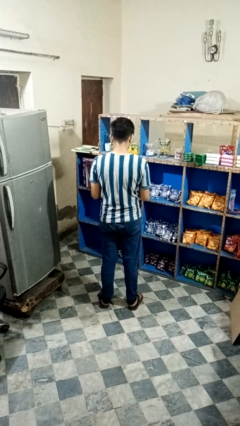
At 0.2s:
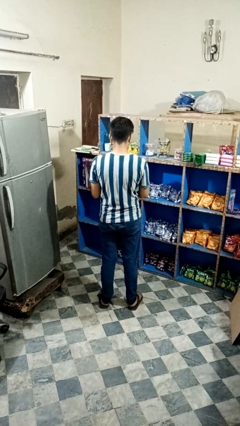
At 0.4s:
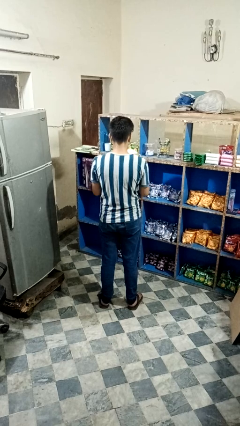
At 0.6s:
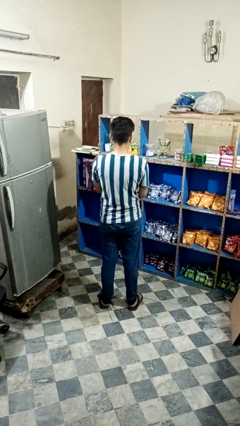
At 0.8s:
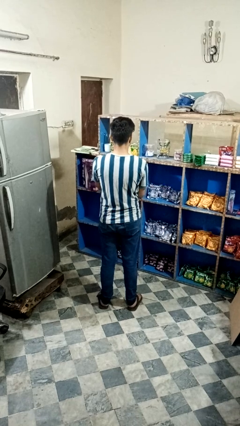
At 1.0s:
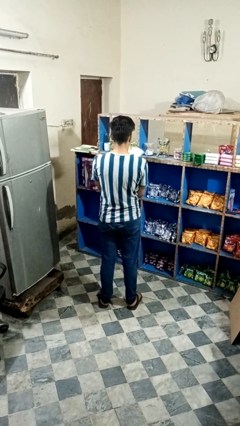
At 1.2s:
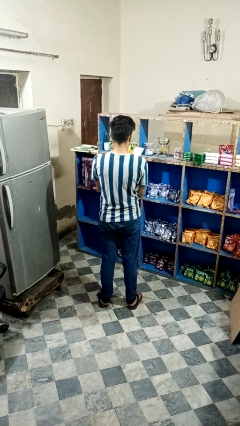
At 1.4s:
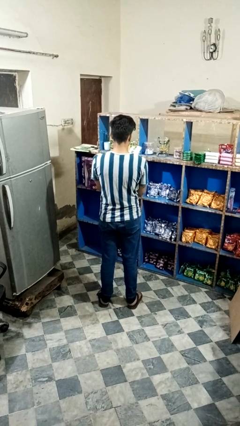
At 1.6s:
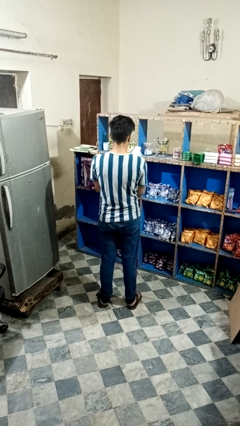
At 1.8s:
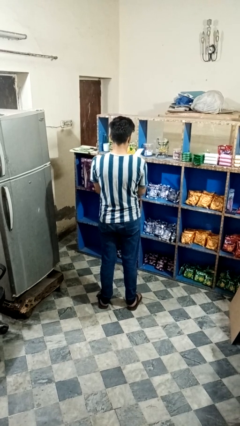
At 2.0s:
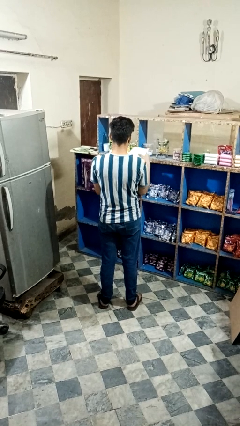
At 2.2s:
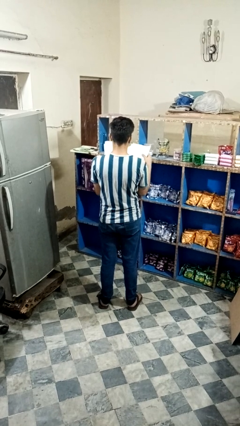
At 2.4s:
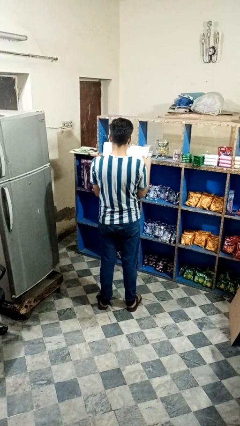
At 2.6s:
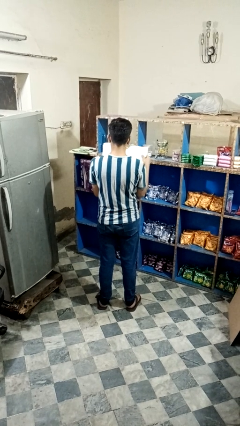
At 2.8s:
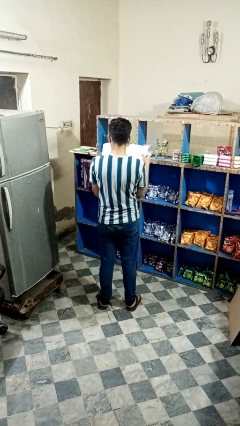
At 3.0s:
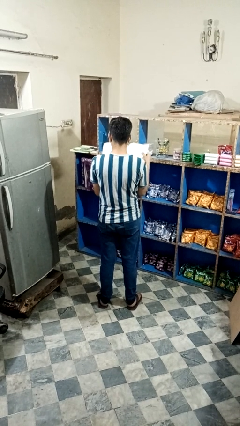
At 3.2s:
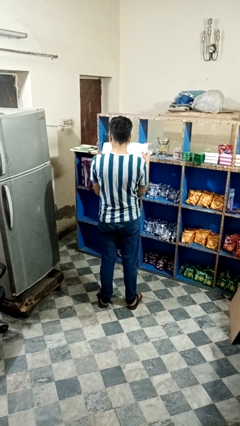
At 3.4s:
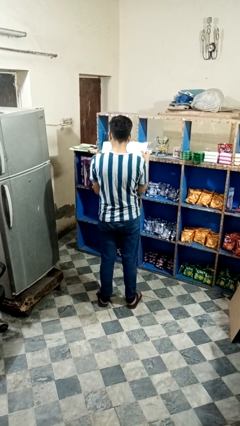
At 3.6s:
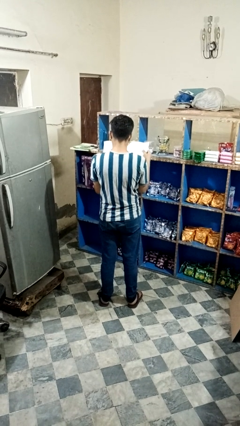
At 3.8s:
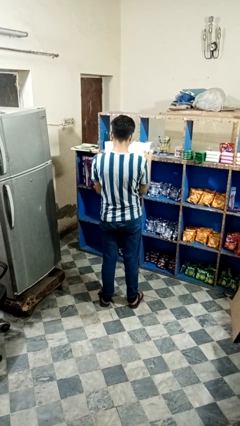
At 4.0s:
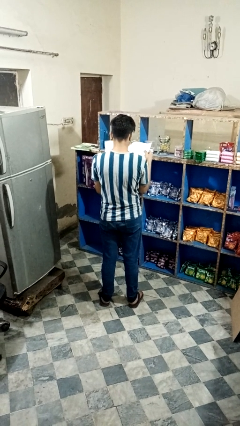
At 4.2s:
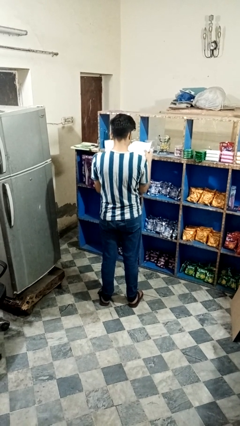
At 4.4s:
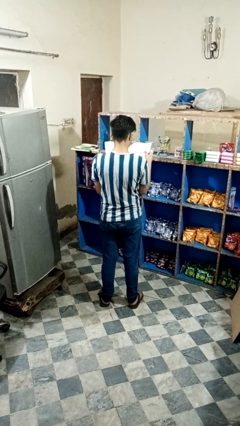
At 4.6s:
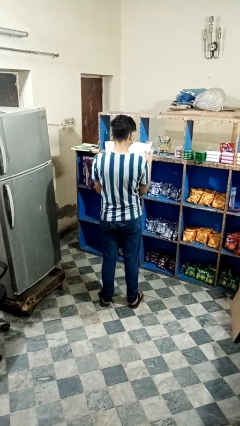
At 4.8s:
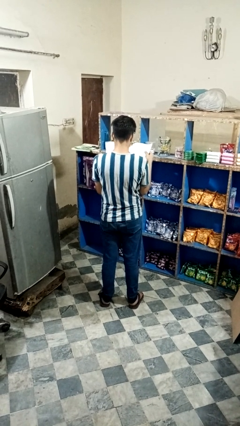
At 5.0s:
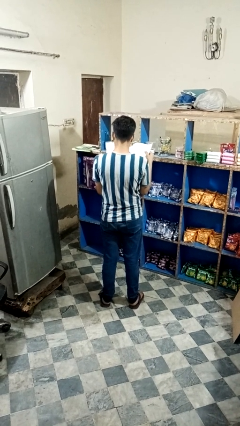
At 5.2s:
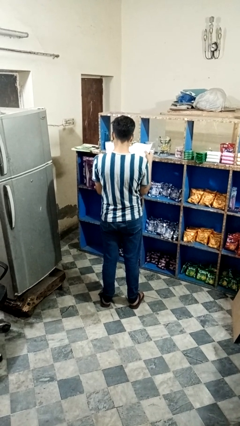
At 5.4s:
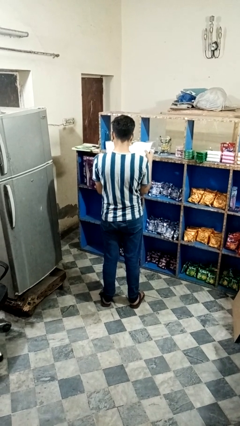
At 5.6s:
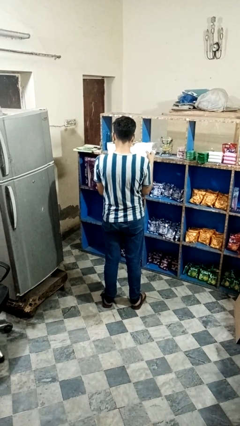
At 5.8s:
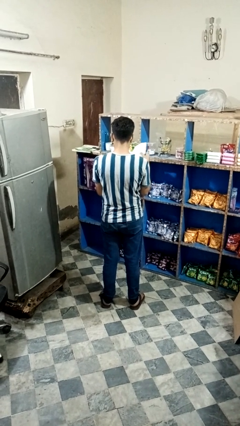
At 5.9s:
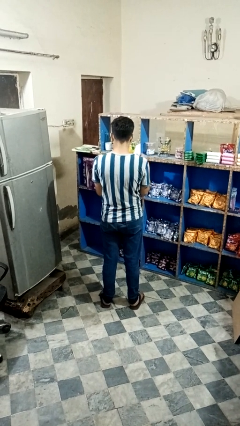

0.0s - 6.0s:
person reads newspaper

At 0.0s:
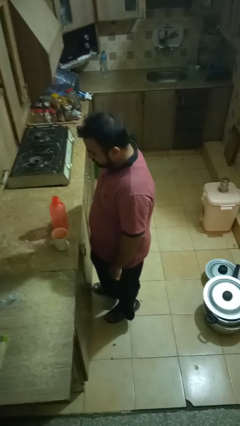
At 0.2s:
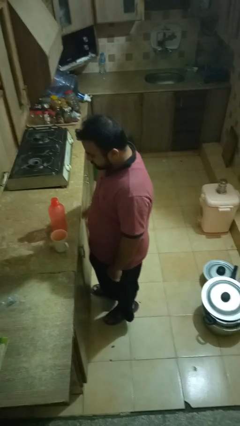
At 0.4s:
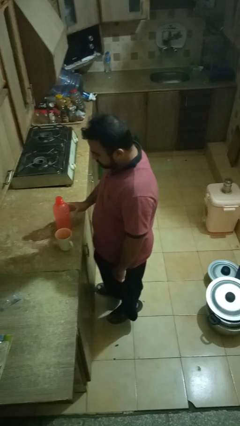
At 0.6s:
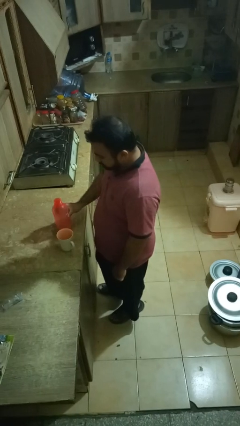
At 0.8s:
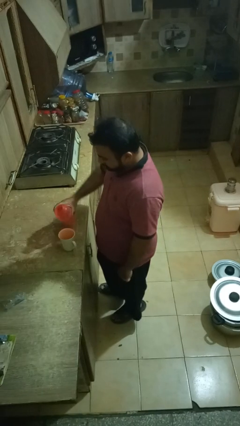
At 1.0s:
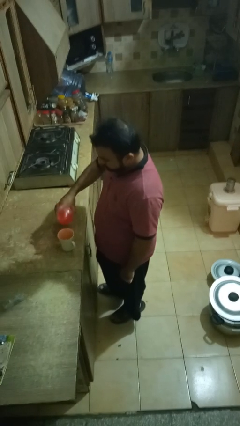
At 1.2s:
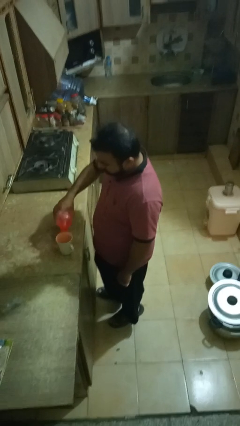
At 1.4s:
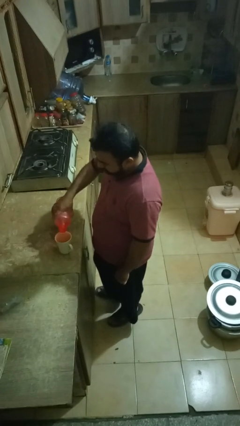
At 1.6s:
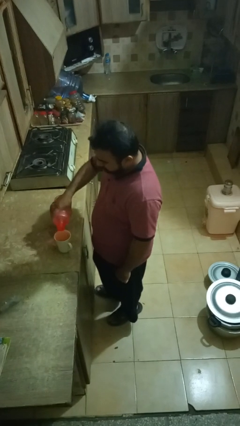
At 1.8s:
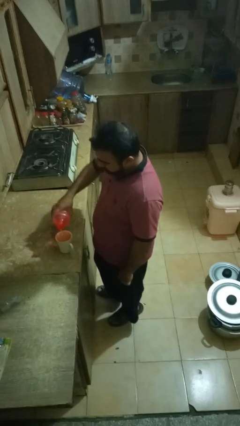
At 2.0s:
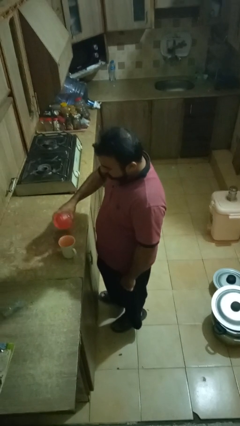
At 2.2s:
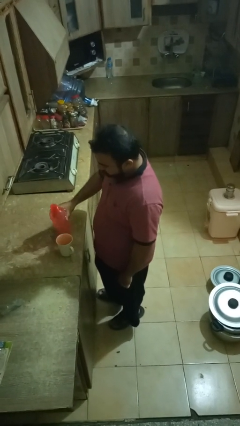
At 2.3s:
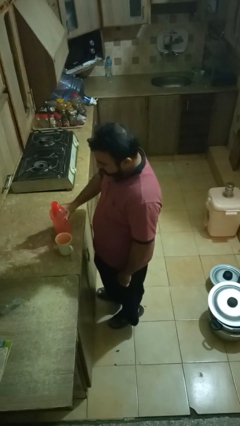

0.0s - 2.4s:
person pours liquid into cup

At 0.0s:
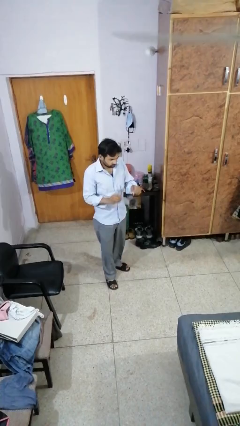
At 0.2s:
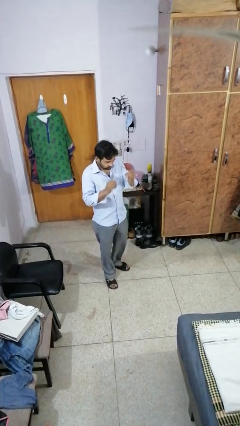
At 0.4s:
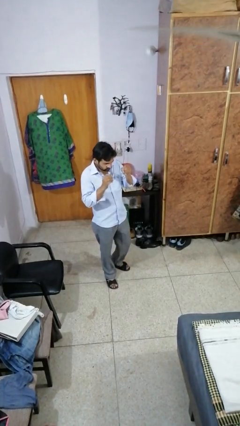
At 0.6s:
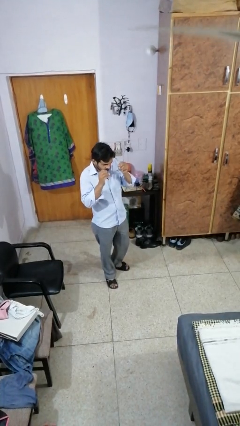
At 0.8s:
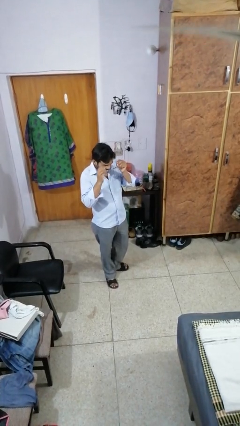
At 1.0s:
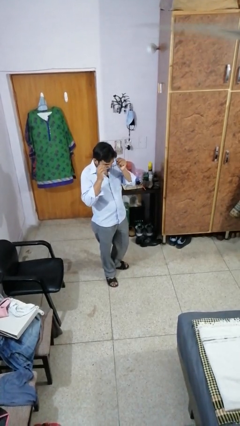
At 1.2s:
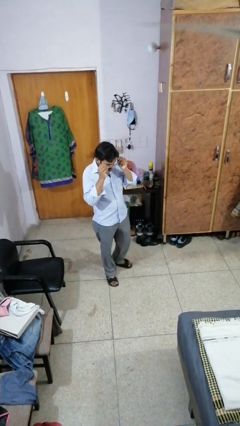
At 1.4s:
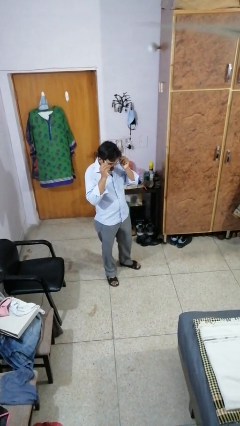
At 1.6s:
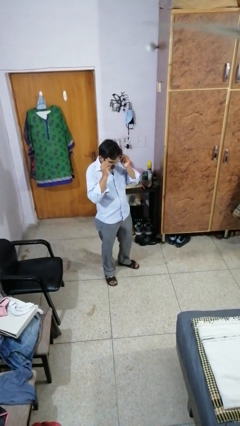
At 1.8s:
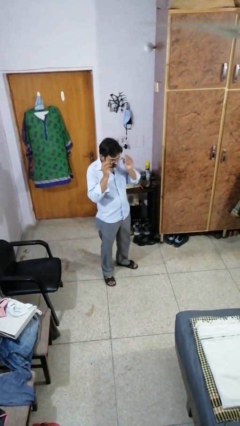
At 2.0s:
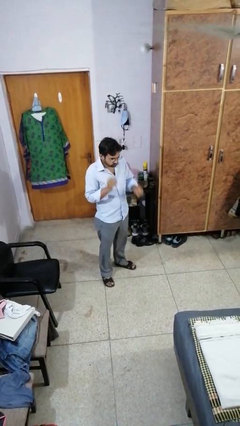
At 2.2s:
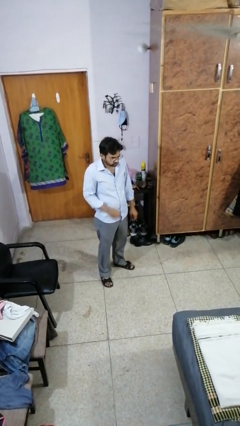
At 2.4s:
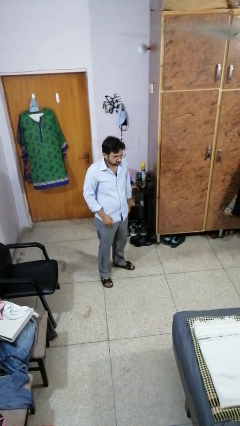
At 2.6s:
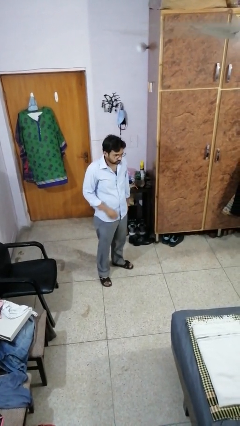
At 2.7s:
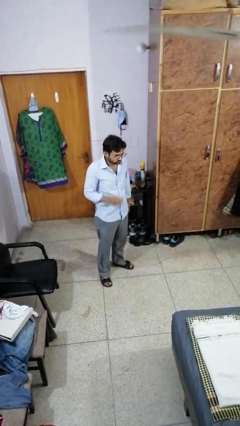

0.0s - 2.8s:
person puts on glasses

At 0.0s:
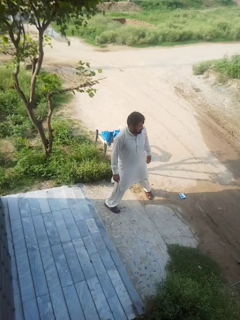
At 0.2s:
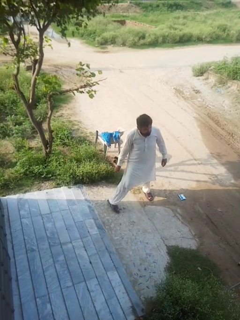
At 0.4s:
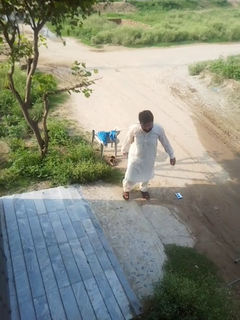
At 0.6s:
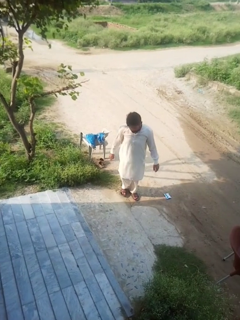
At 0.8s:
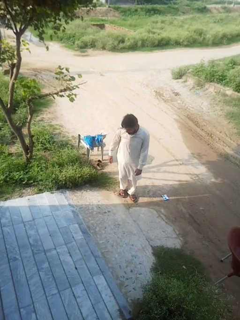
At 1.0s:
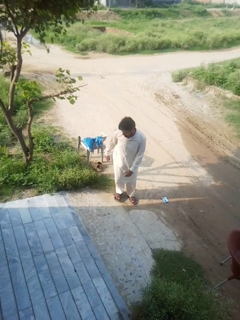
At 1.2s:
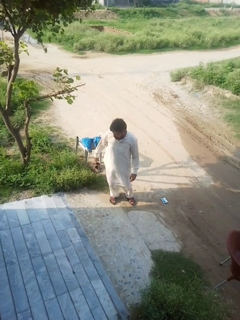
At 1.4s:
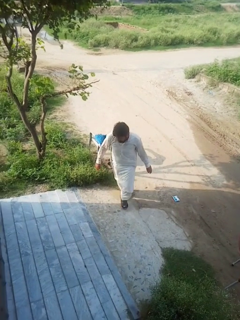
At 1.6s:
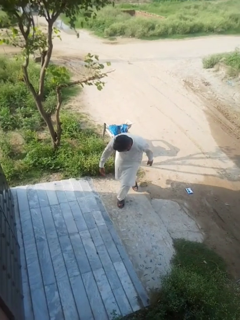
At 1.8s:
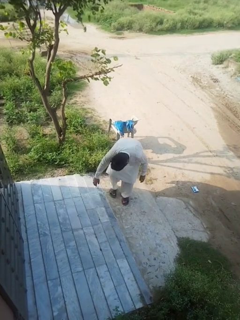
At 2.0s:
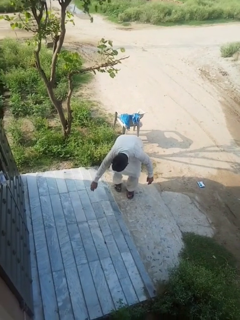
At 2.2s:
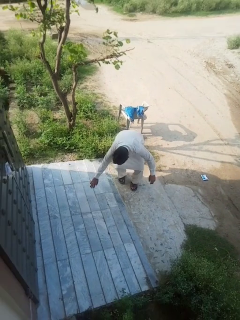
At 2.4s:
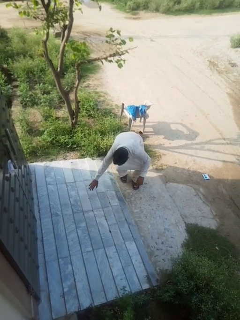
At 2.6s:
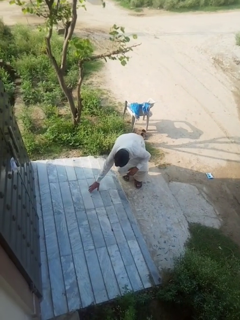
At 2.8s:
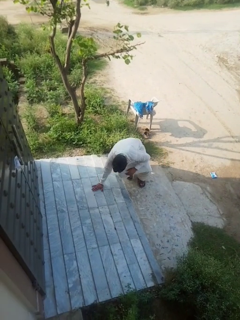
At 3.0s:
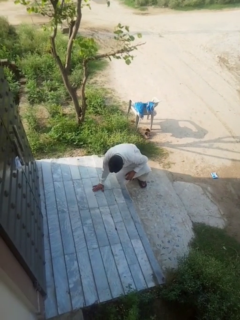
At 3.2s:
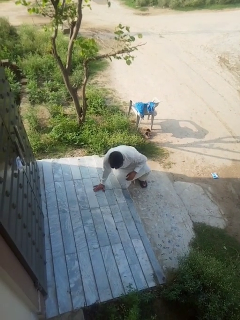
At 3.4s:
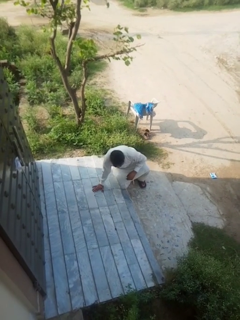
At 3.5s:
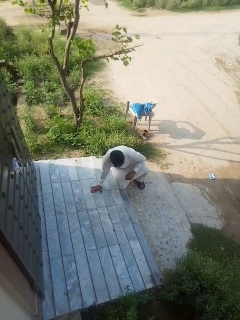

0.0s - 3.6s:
person trips on object on floor

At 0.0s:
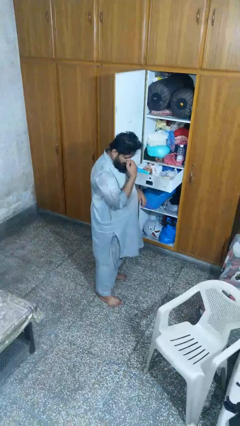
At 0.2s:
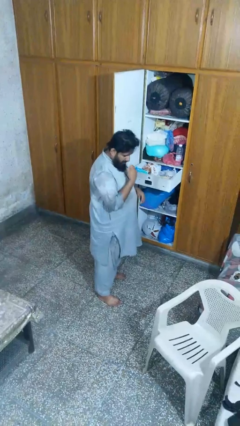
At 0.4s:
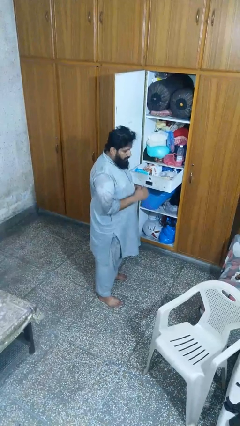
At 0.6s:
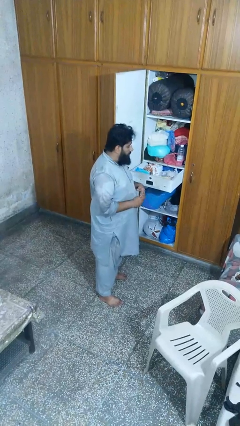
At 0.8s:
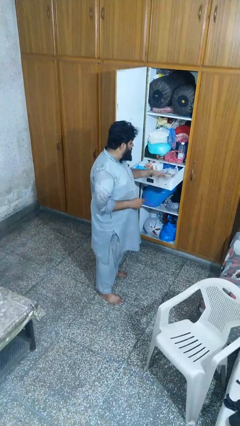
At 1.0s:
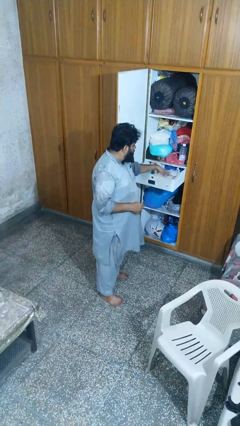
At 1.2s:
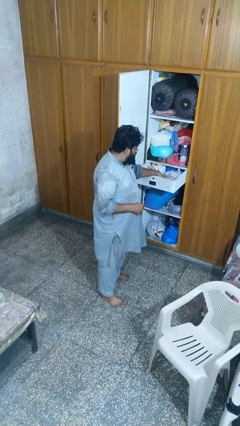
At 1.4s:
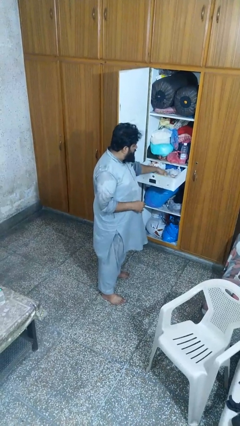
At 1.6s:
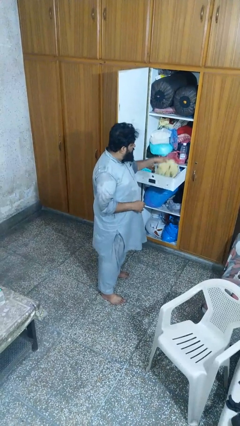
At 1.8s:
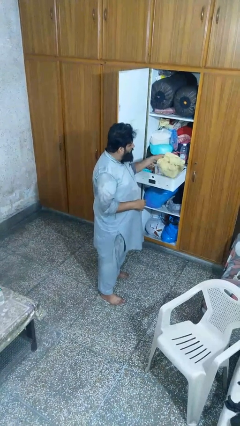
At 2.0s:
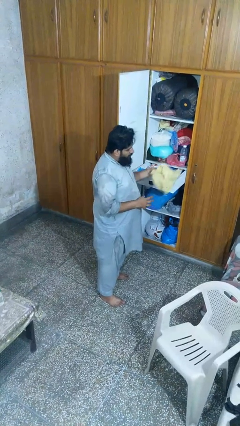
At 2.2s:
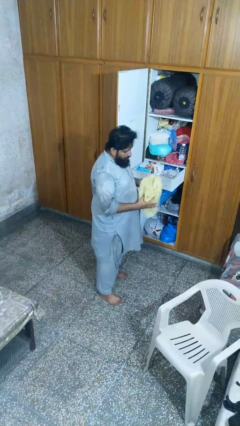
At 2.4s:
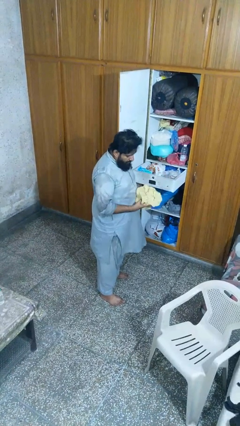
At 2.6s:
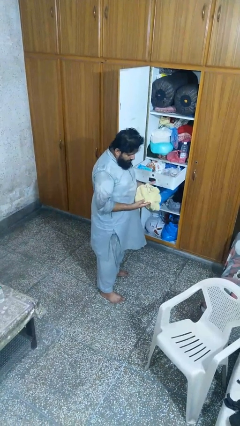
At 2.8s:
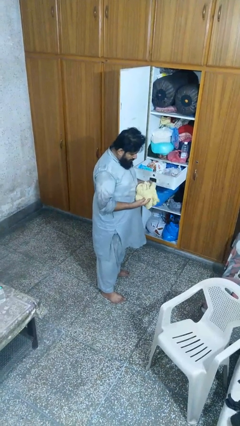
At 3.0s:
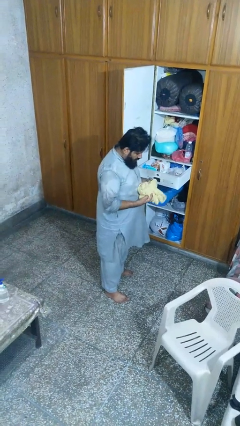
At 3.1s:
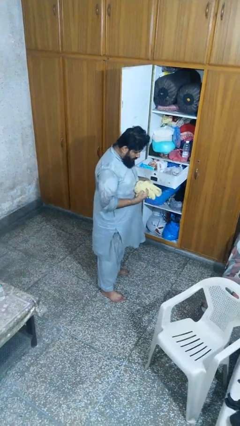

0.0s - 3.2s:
person takes clothes from dresser

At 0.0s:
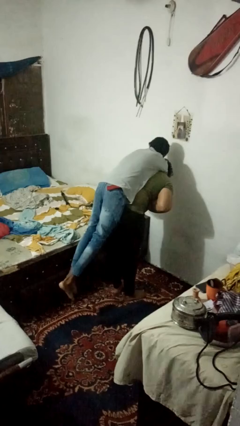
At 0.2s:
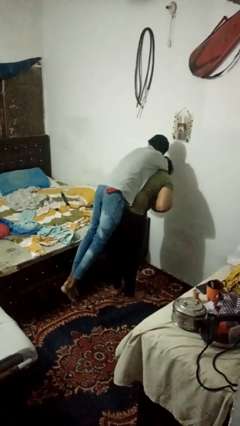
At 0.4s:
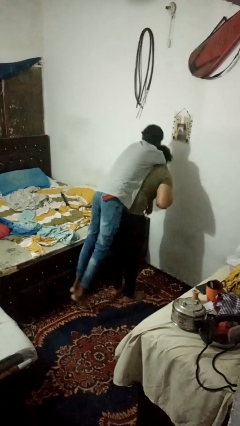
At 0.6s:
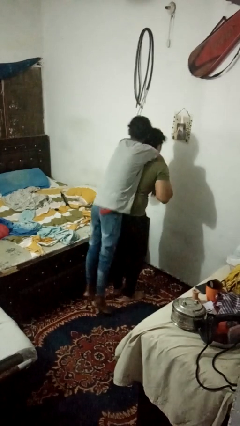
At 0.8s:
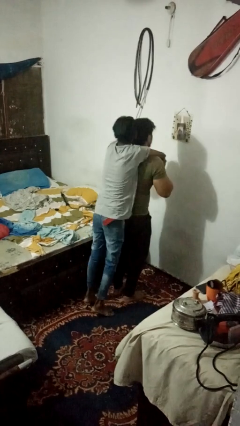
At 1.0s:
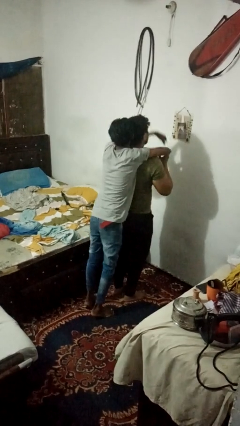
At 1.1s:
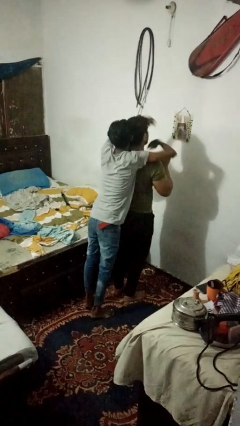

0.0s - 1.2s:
person carries person on shoulders
